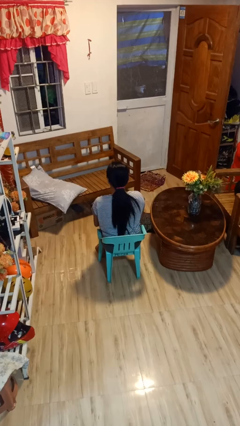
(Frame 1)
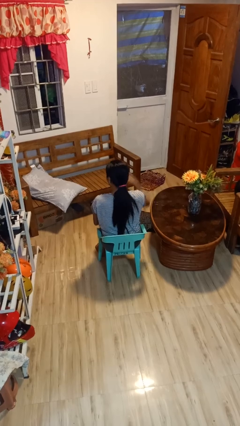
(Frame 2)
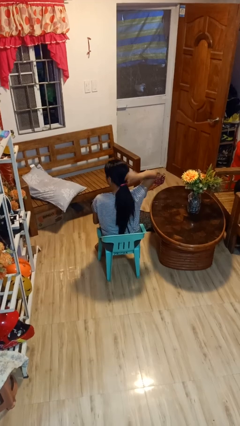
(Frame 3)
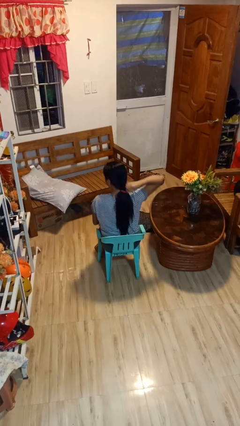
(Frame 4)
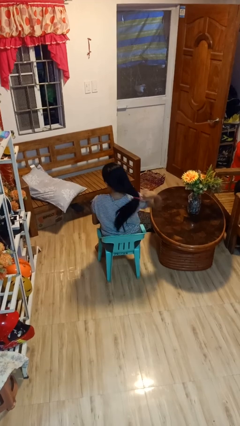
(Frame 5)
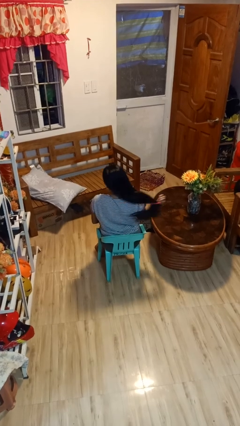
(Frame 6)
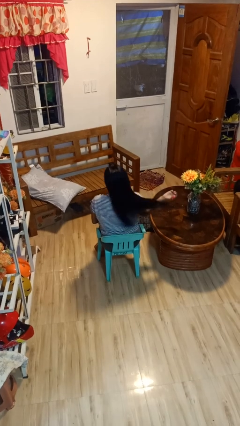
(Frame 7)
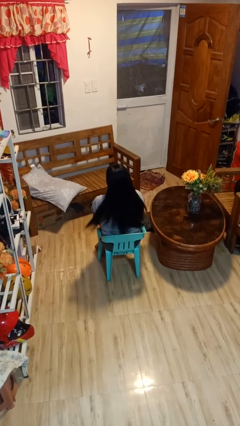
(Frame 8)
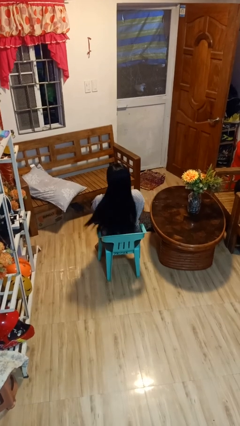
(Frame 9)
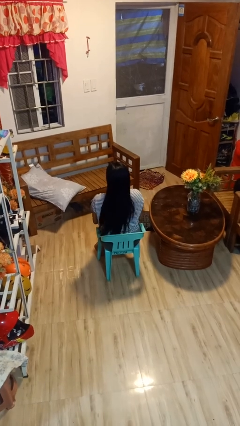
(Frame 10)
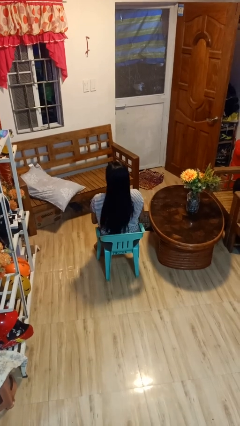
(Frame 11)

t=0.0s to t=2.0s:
person takes off hairtie

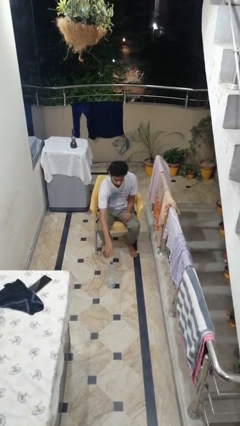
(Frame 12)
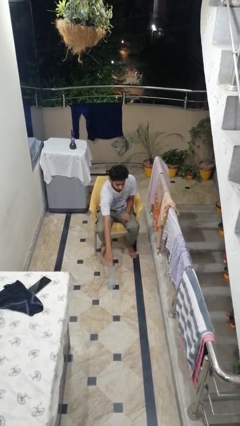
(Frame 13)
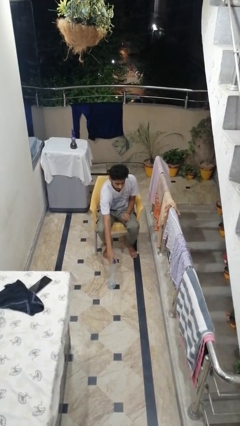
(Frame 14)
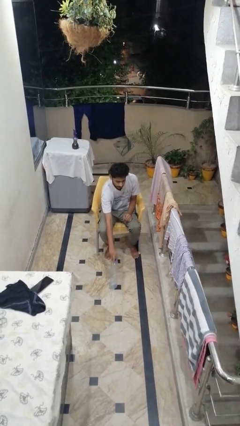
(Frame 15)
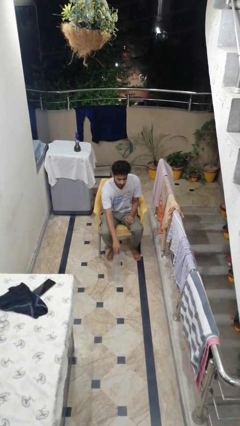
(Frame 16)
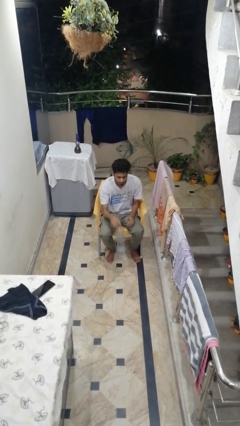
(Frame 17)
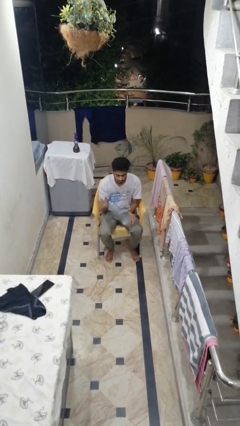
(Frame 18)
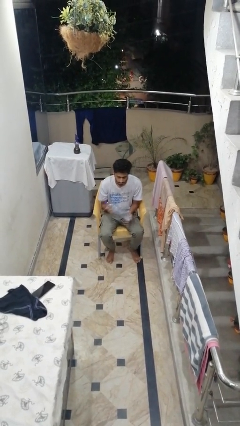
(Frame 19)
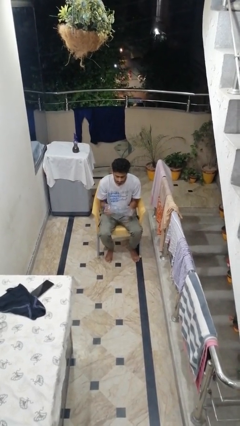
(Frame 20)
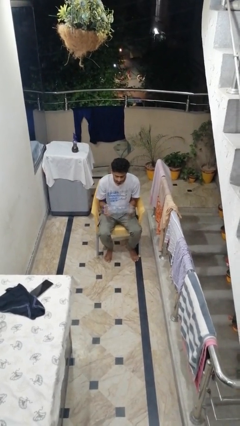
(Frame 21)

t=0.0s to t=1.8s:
person picks up object from floor

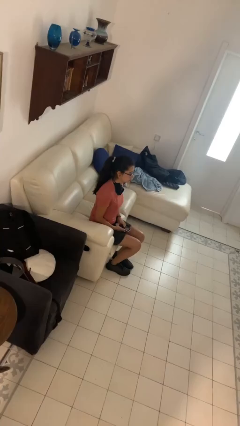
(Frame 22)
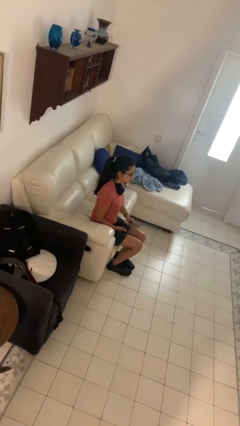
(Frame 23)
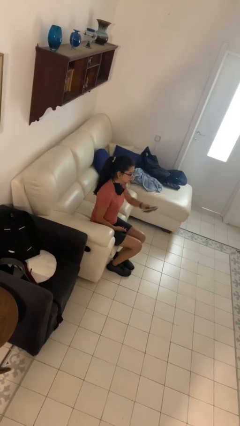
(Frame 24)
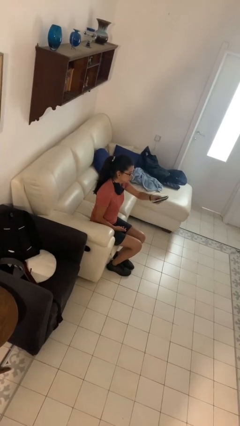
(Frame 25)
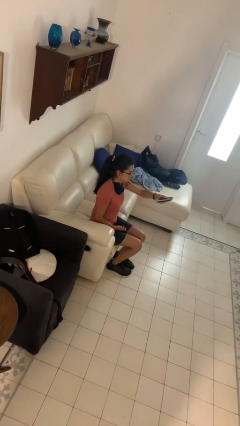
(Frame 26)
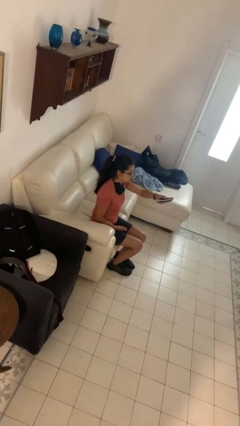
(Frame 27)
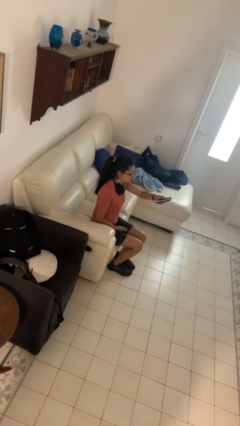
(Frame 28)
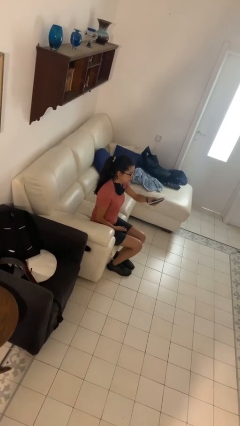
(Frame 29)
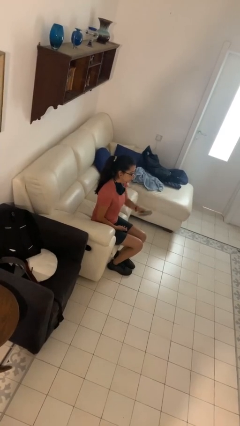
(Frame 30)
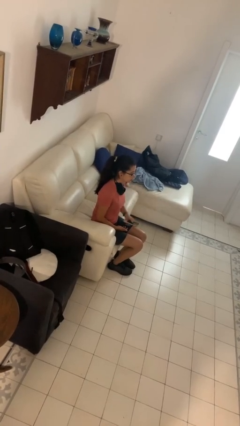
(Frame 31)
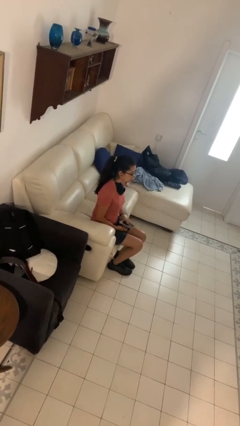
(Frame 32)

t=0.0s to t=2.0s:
person uses television remote

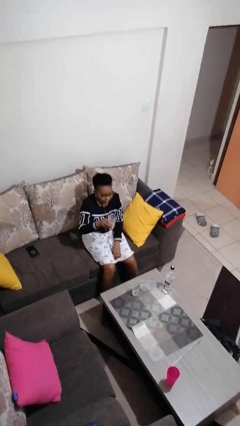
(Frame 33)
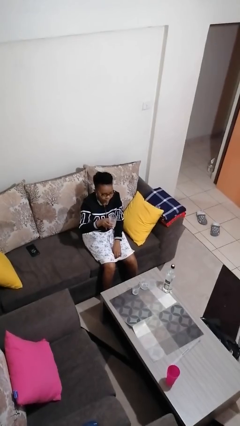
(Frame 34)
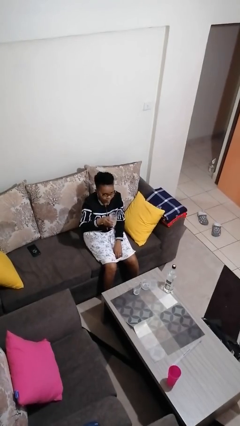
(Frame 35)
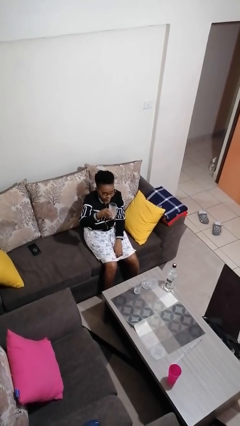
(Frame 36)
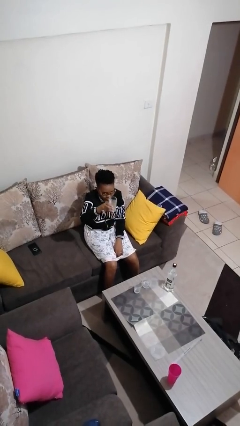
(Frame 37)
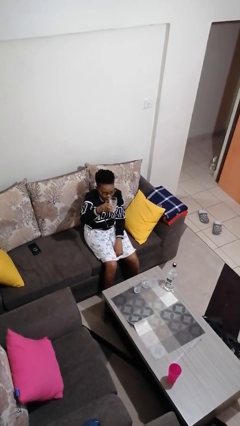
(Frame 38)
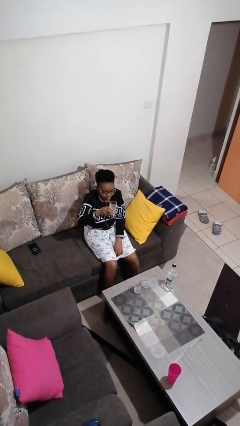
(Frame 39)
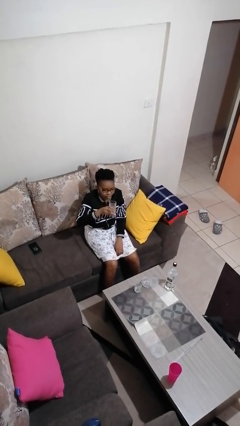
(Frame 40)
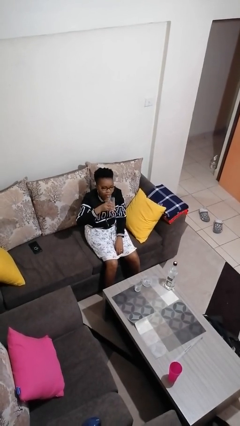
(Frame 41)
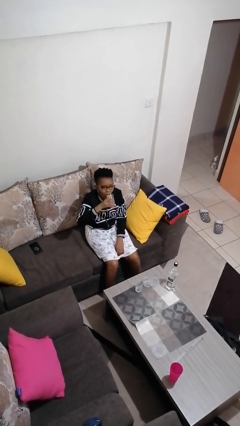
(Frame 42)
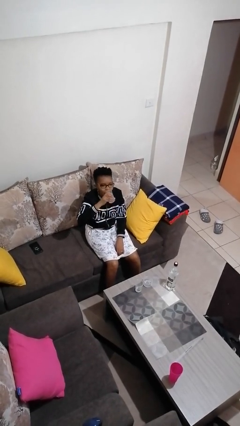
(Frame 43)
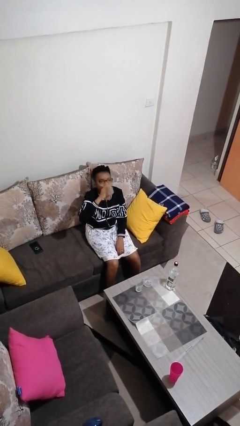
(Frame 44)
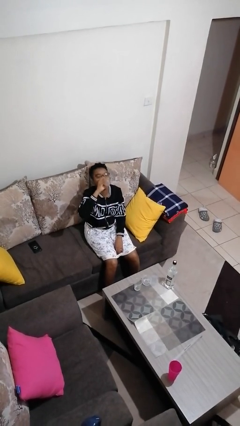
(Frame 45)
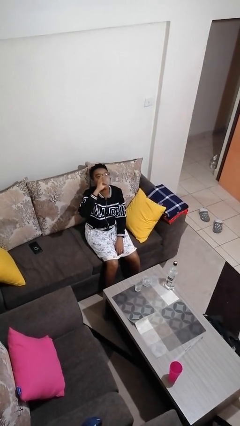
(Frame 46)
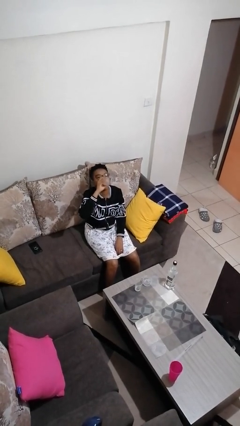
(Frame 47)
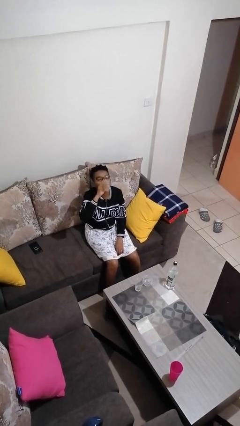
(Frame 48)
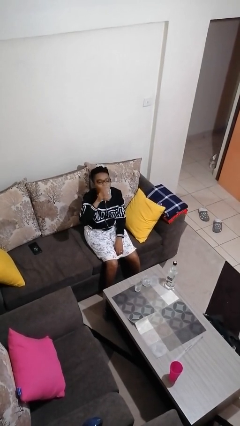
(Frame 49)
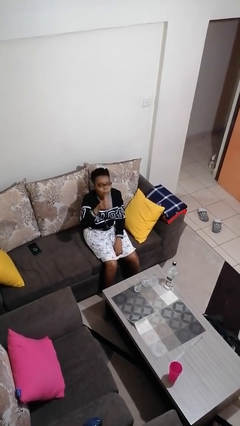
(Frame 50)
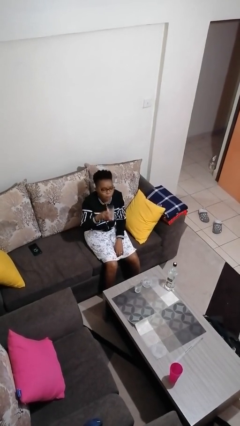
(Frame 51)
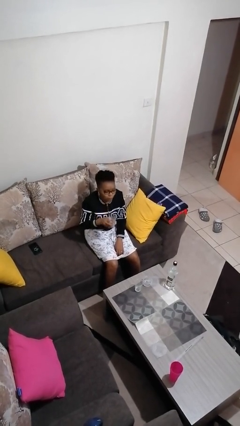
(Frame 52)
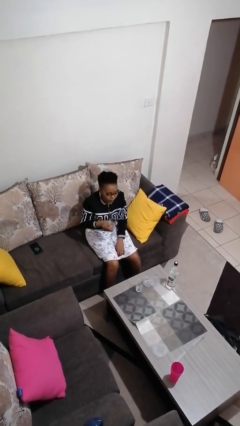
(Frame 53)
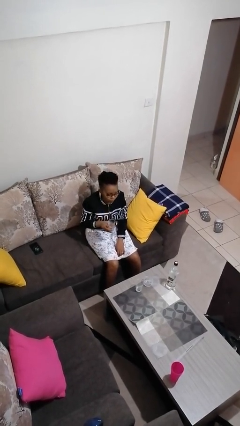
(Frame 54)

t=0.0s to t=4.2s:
person drinks from shotglass

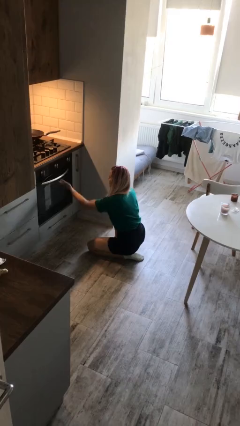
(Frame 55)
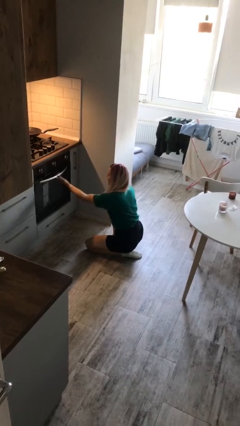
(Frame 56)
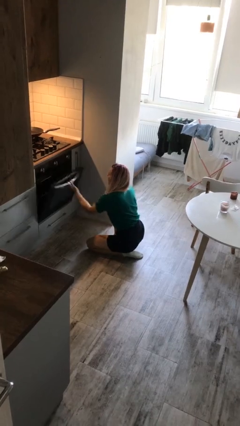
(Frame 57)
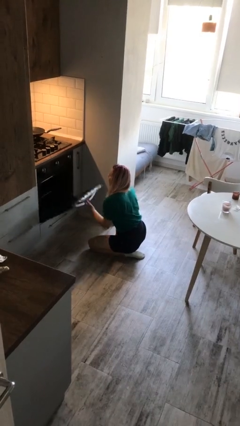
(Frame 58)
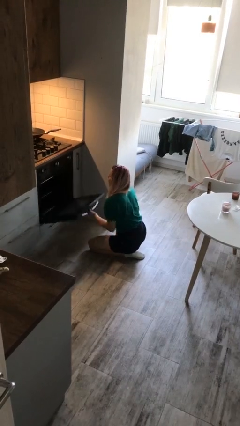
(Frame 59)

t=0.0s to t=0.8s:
person opens oven door

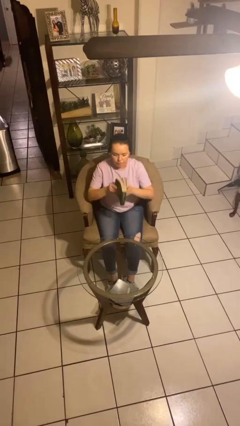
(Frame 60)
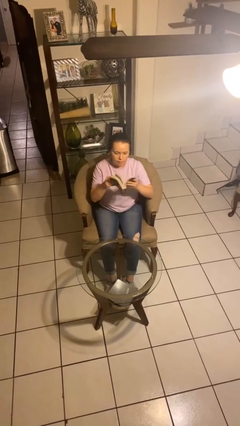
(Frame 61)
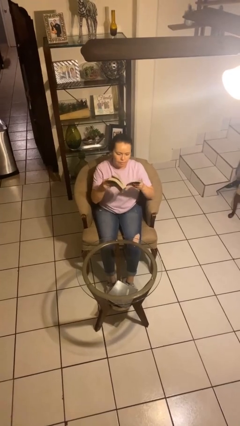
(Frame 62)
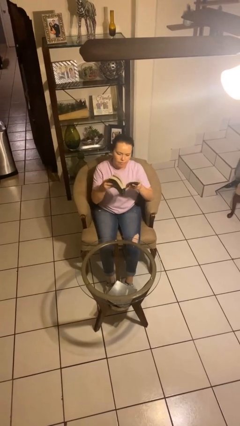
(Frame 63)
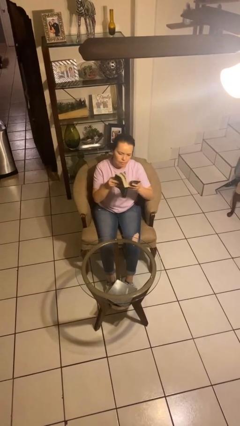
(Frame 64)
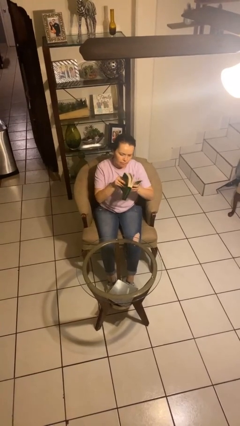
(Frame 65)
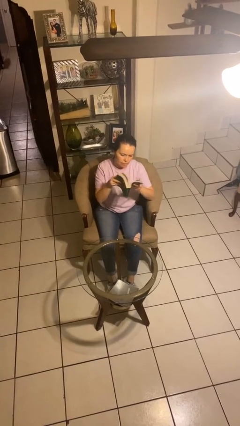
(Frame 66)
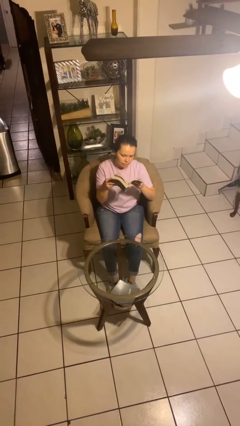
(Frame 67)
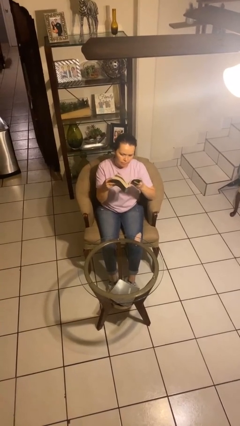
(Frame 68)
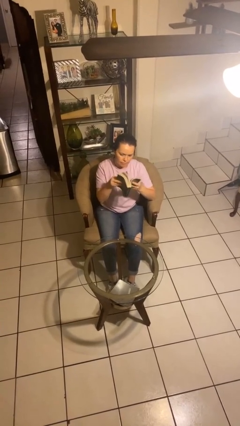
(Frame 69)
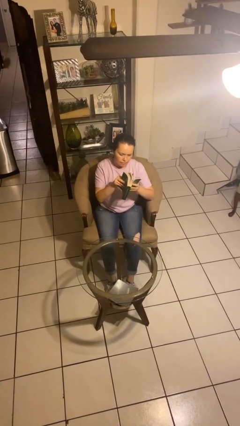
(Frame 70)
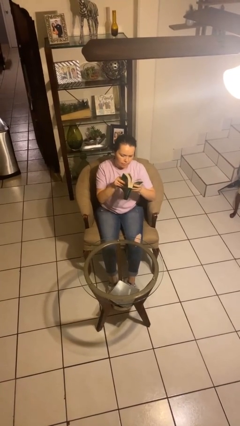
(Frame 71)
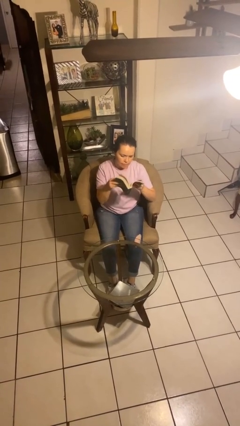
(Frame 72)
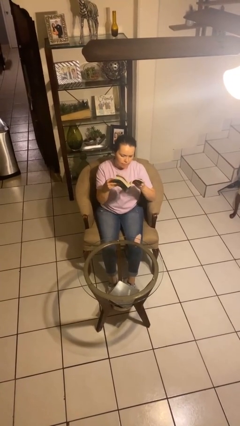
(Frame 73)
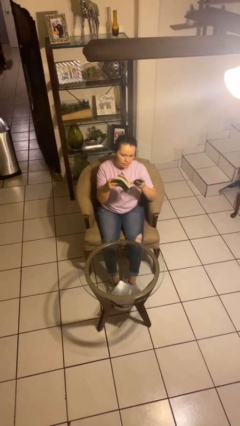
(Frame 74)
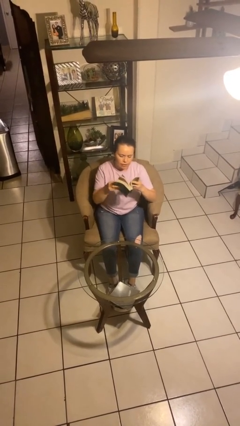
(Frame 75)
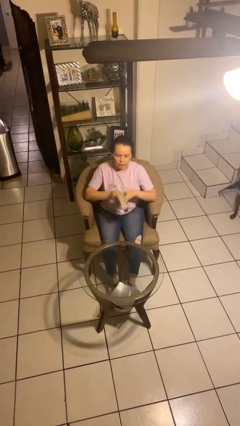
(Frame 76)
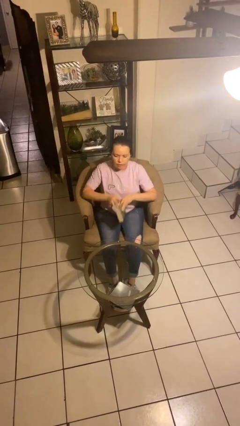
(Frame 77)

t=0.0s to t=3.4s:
person reads book

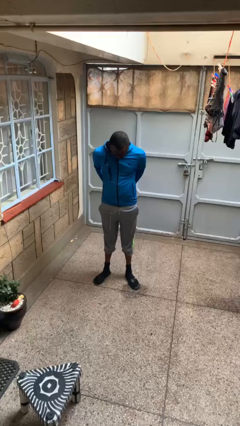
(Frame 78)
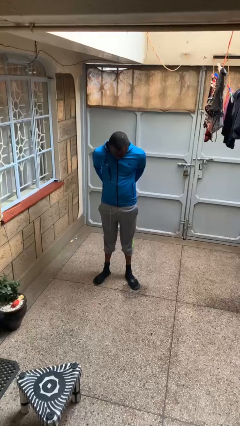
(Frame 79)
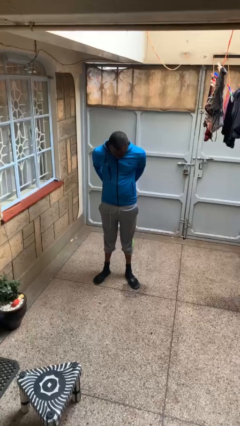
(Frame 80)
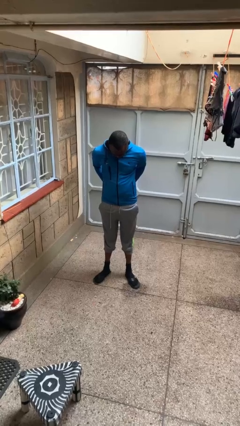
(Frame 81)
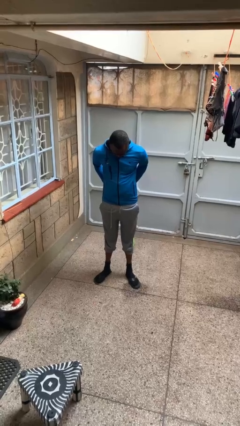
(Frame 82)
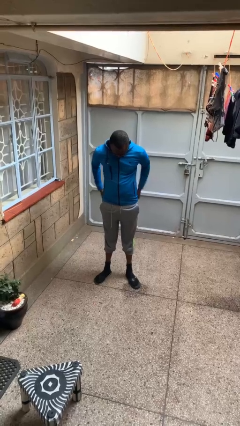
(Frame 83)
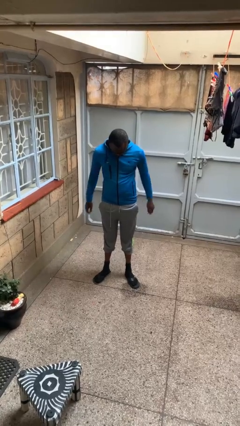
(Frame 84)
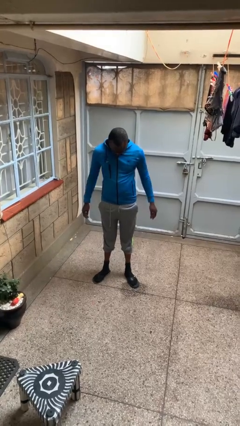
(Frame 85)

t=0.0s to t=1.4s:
person puts hands in back pockets

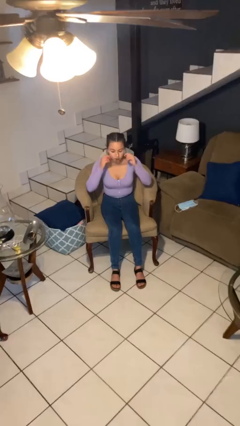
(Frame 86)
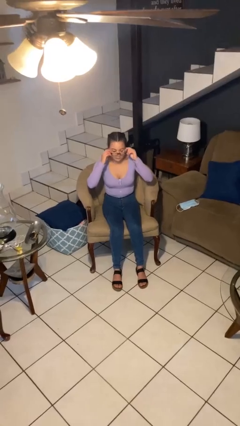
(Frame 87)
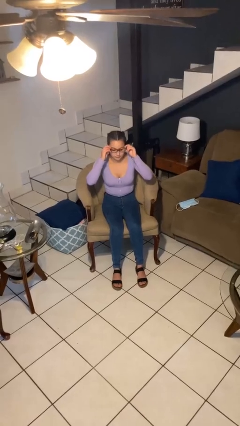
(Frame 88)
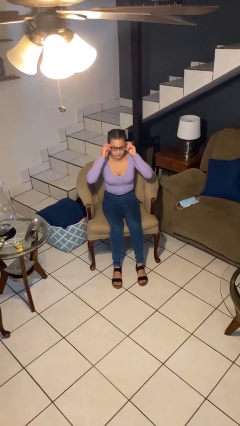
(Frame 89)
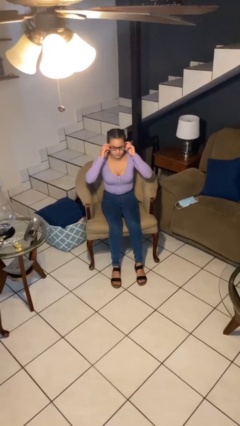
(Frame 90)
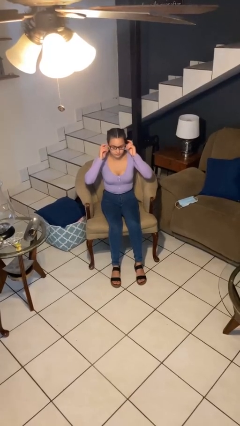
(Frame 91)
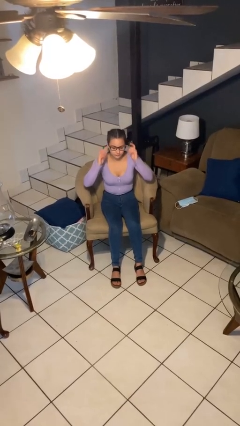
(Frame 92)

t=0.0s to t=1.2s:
person puts on glasses

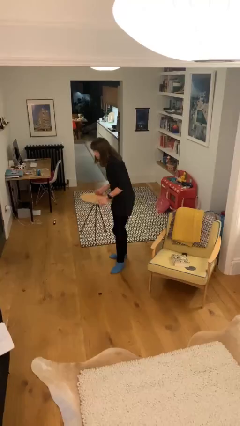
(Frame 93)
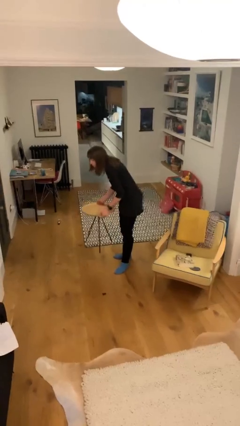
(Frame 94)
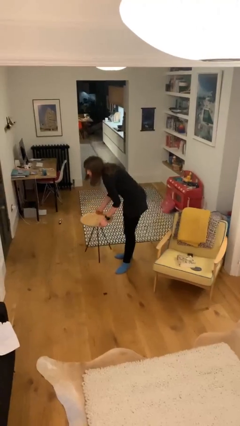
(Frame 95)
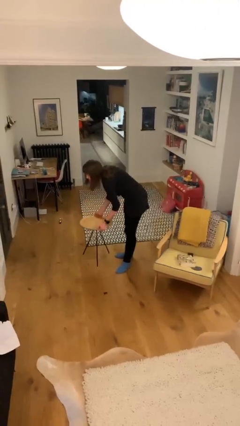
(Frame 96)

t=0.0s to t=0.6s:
person puts down object on floor
